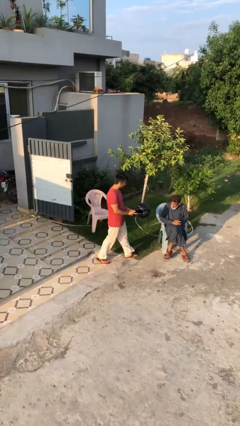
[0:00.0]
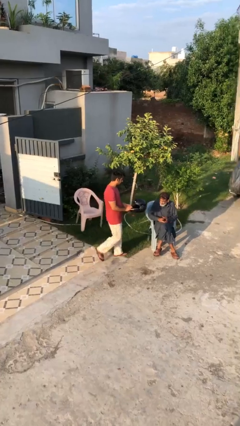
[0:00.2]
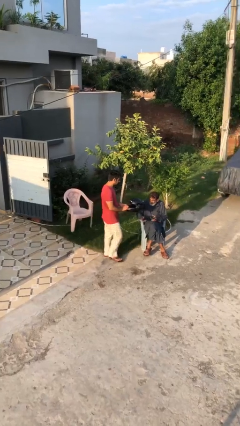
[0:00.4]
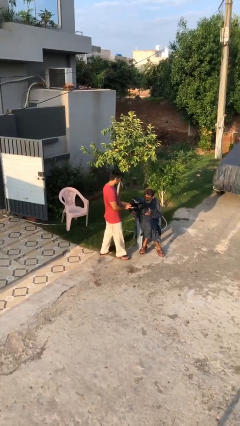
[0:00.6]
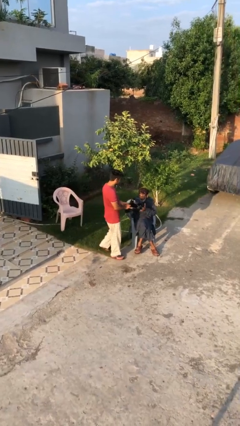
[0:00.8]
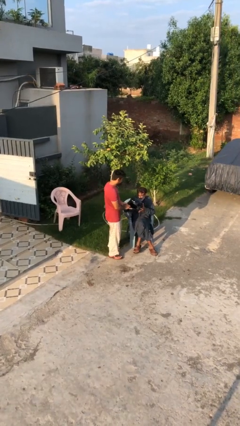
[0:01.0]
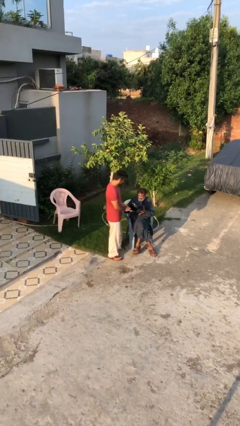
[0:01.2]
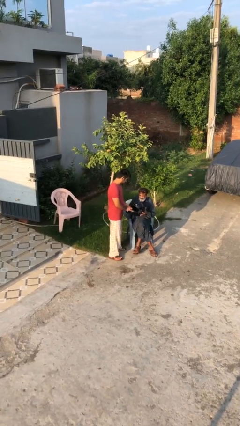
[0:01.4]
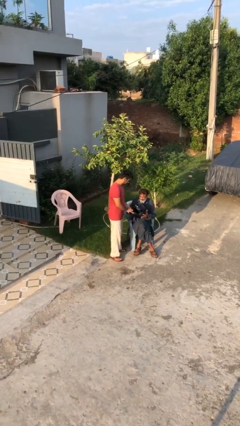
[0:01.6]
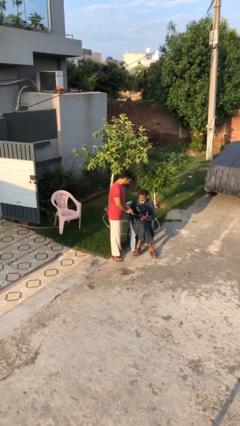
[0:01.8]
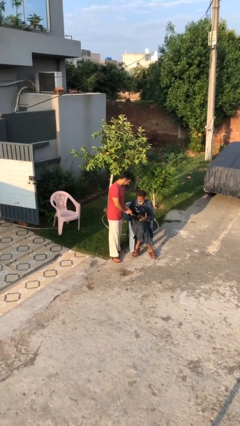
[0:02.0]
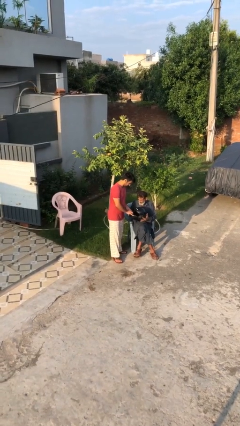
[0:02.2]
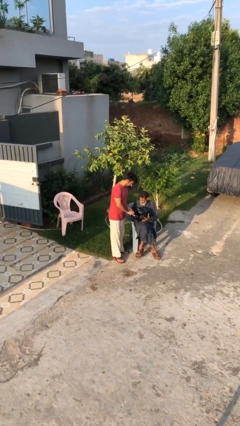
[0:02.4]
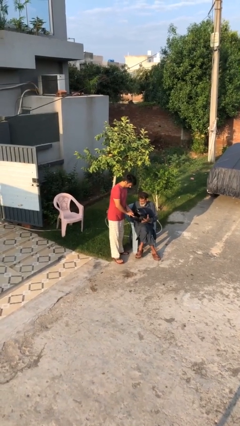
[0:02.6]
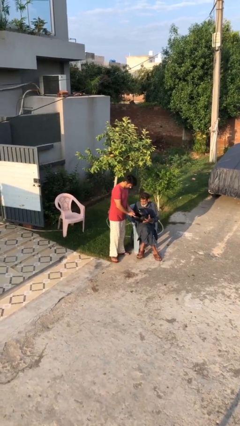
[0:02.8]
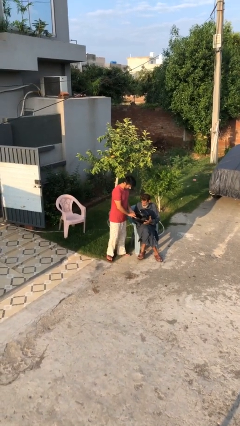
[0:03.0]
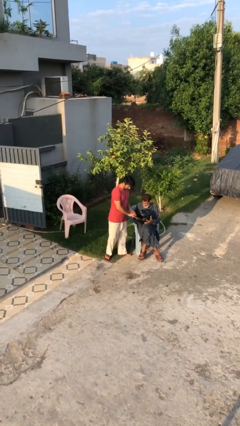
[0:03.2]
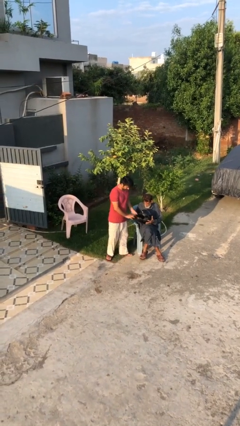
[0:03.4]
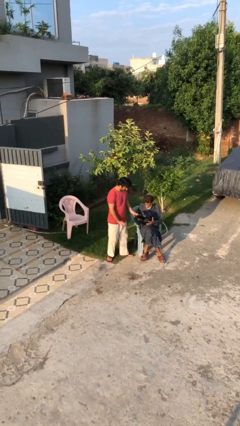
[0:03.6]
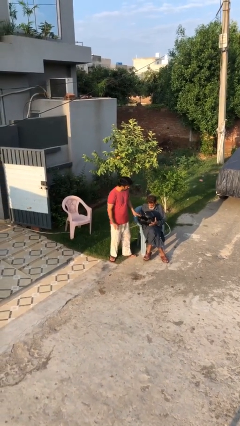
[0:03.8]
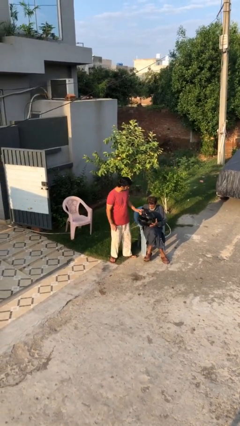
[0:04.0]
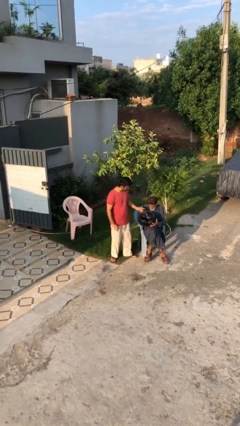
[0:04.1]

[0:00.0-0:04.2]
person transfers object to person

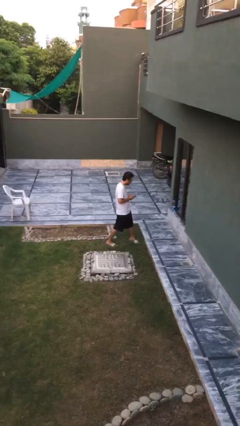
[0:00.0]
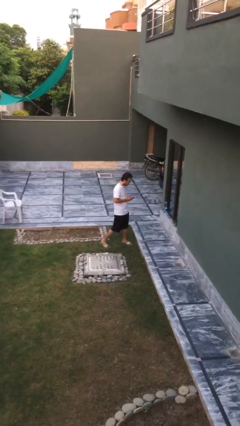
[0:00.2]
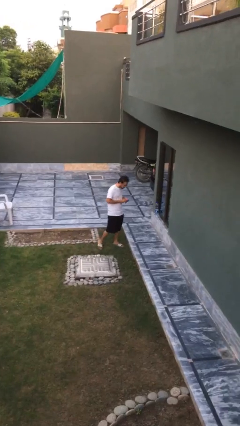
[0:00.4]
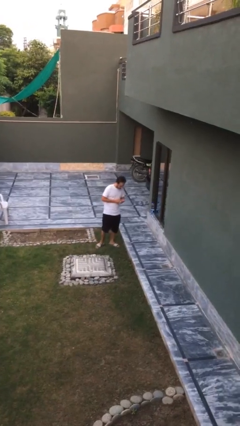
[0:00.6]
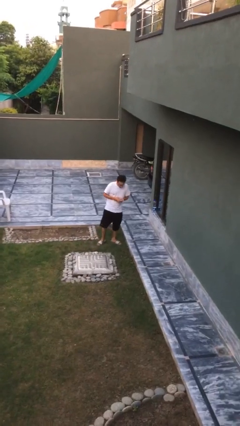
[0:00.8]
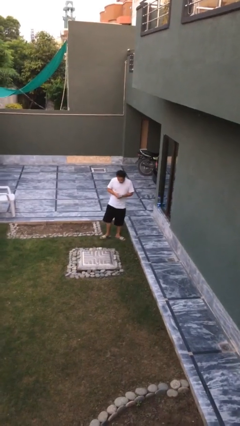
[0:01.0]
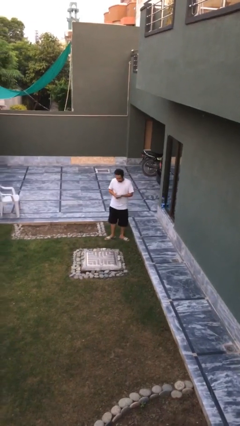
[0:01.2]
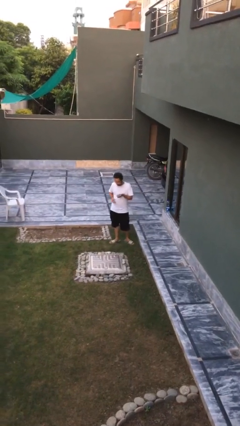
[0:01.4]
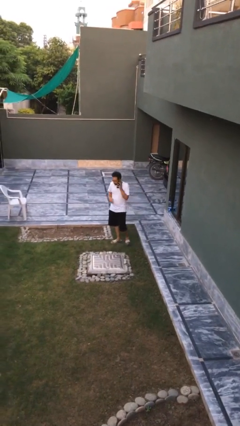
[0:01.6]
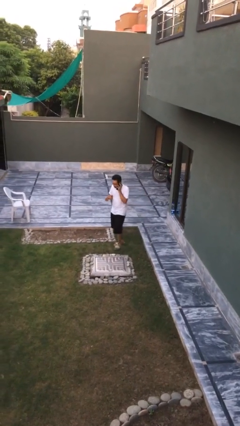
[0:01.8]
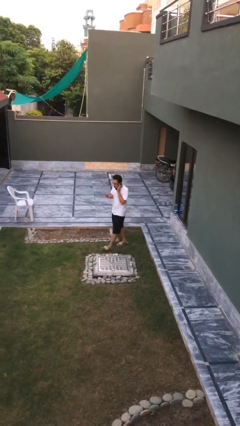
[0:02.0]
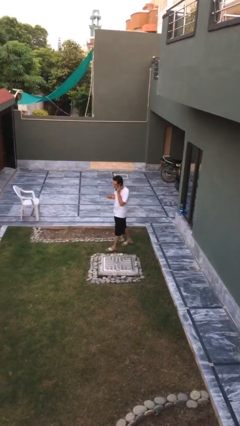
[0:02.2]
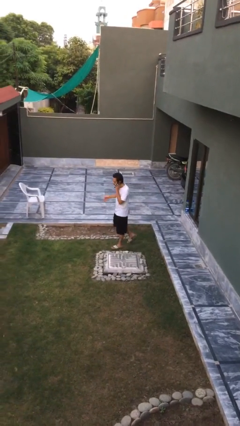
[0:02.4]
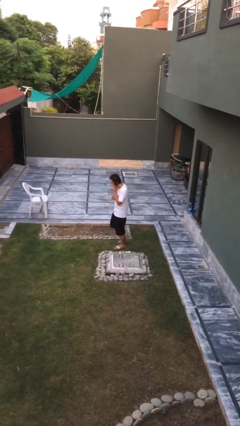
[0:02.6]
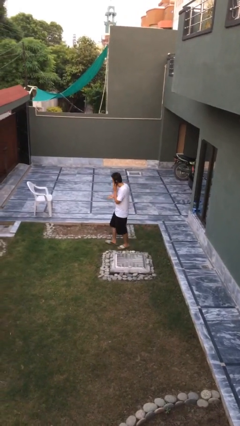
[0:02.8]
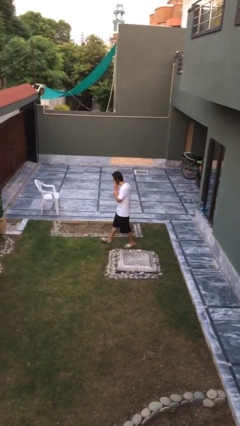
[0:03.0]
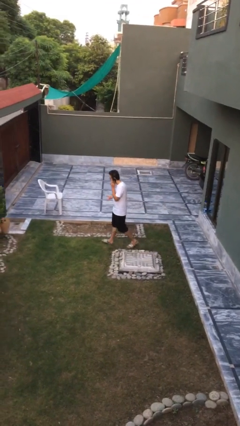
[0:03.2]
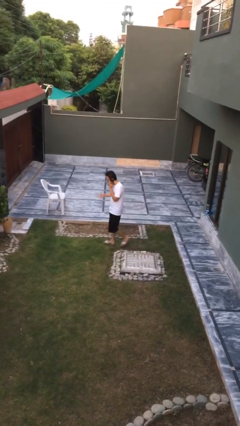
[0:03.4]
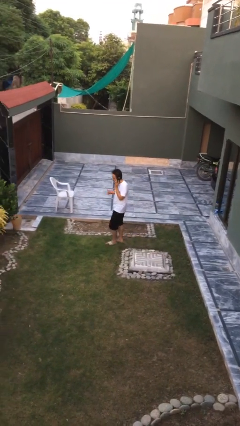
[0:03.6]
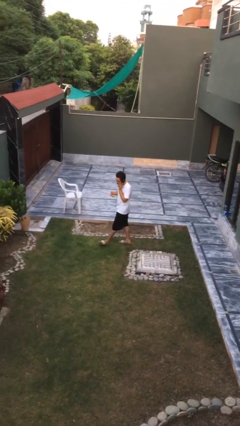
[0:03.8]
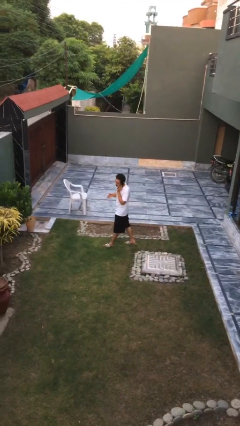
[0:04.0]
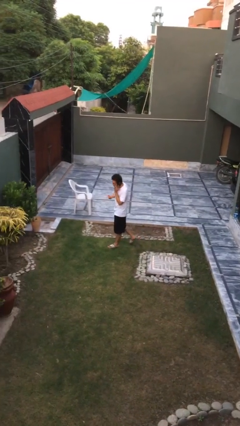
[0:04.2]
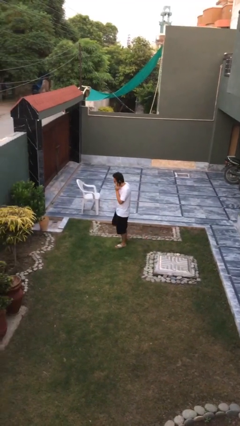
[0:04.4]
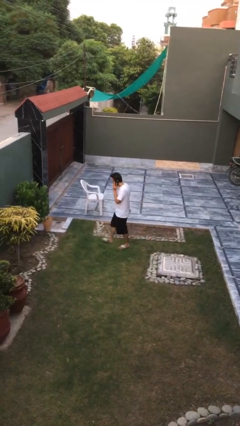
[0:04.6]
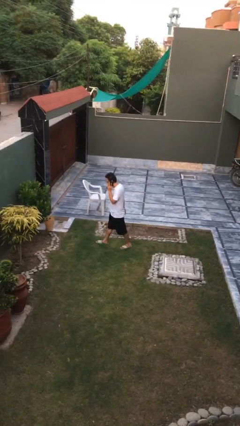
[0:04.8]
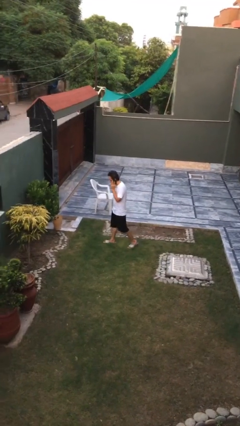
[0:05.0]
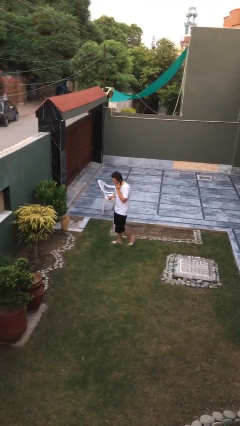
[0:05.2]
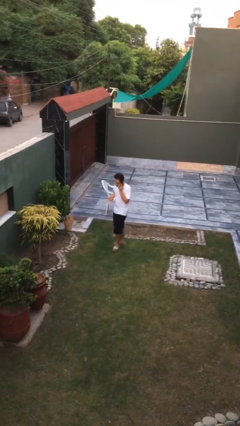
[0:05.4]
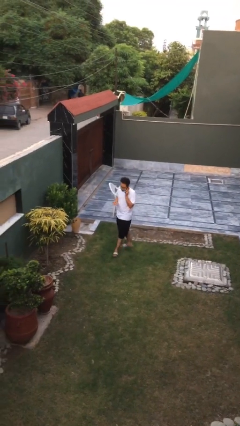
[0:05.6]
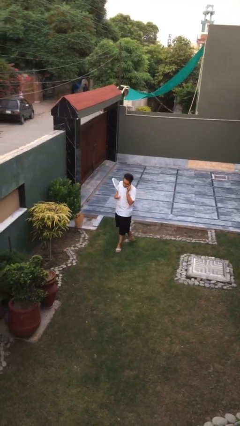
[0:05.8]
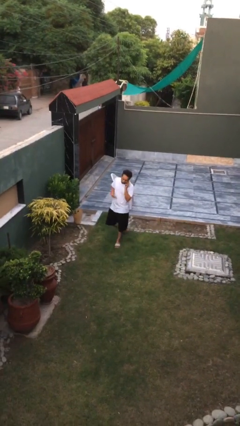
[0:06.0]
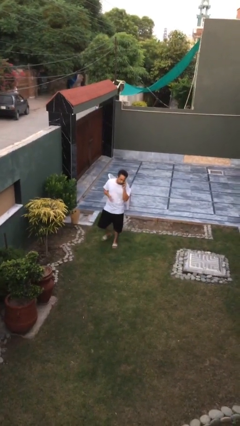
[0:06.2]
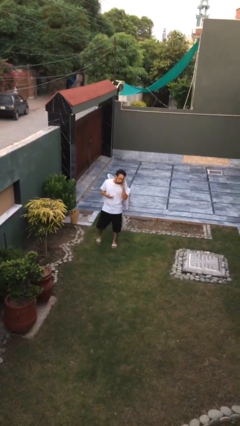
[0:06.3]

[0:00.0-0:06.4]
person talks on phone

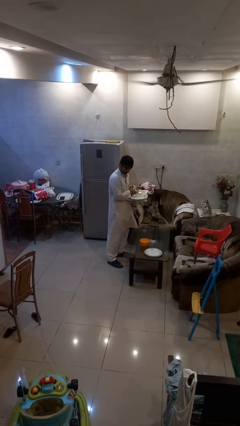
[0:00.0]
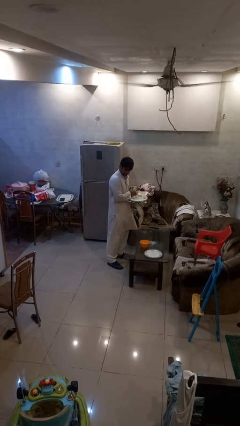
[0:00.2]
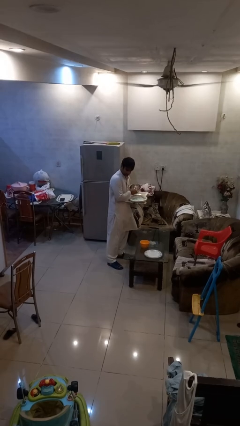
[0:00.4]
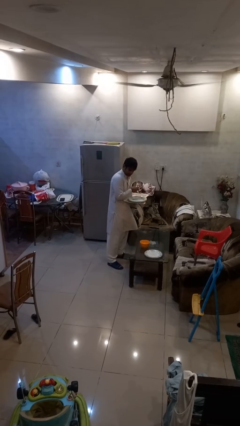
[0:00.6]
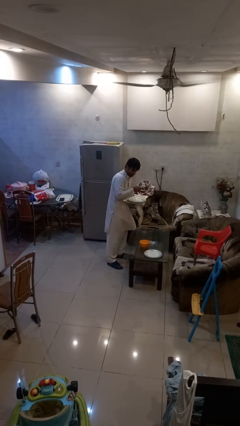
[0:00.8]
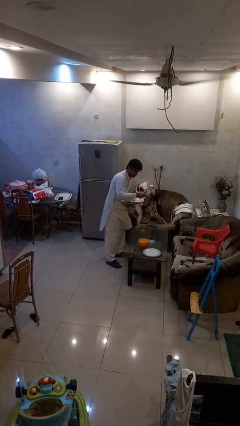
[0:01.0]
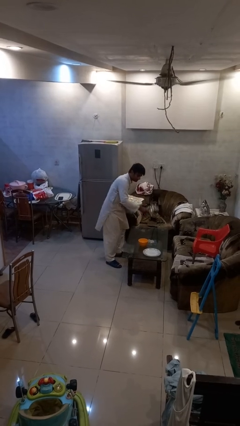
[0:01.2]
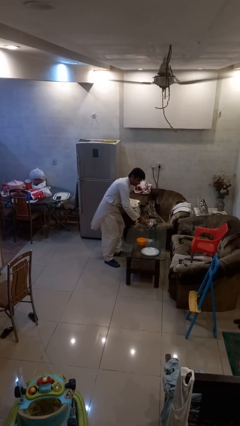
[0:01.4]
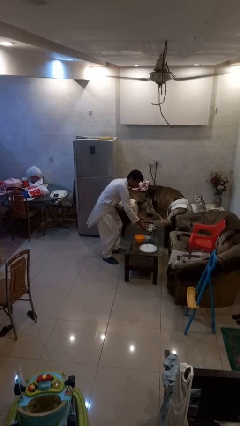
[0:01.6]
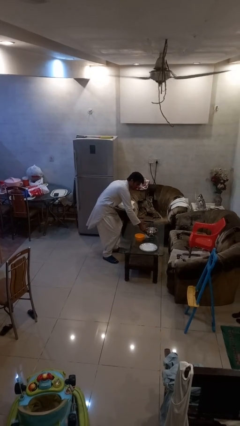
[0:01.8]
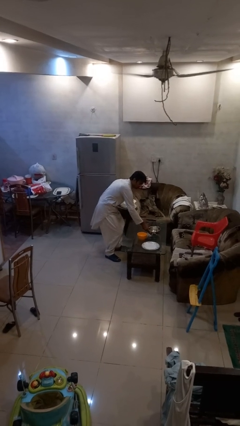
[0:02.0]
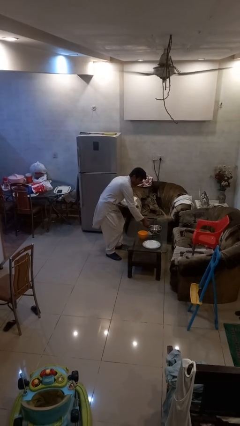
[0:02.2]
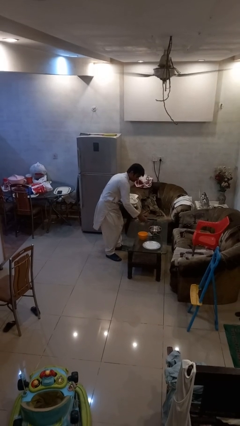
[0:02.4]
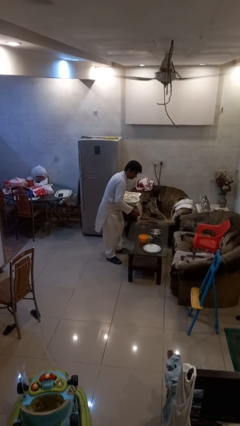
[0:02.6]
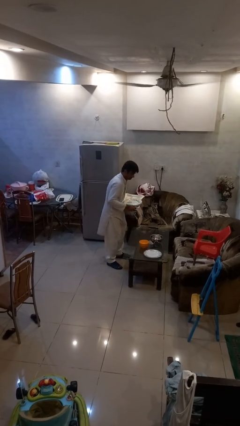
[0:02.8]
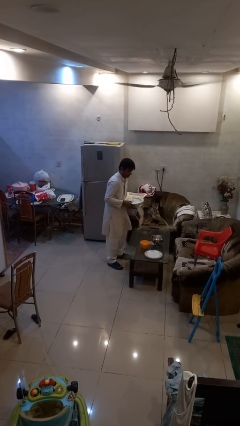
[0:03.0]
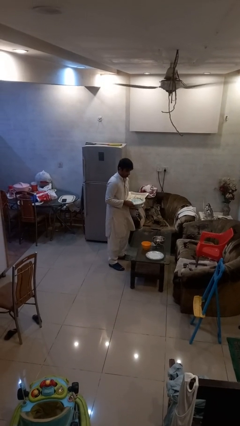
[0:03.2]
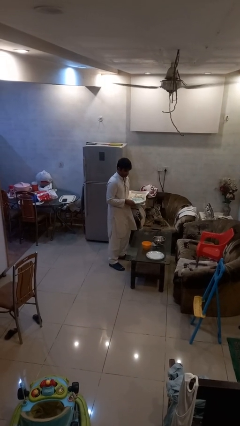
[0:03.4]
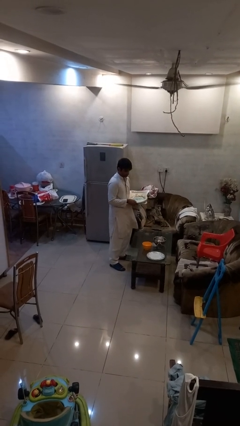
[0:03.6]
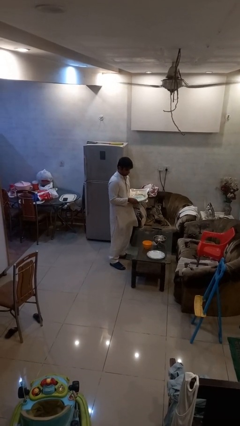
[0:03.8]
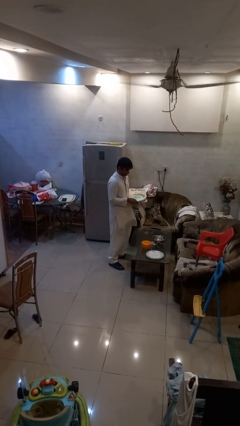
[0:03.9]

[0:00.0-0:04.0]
person sets table

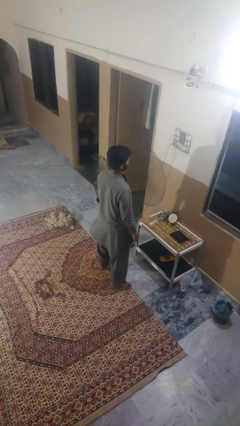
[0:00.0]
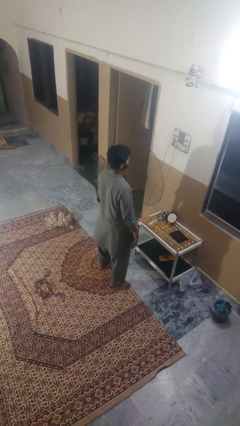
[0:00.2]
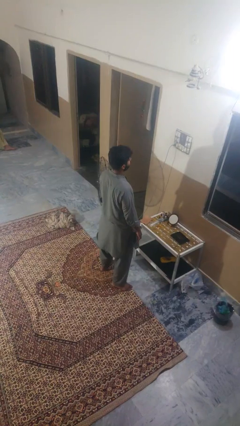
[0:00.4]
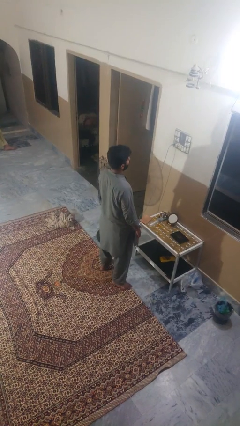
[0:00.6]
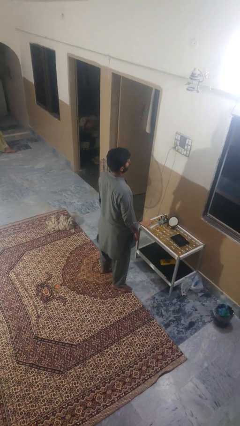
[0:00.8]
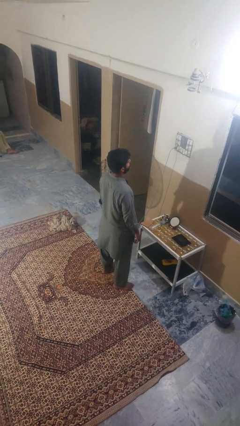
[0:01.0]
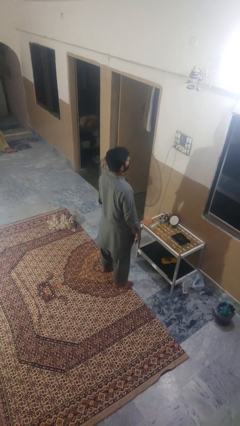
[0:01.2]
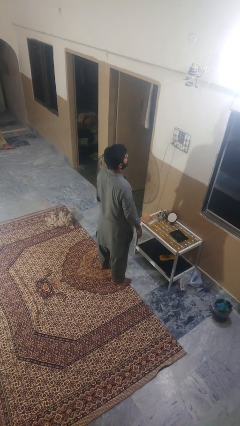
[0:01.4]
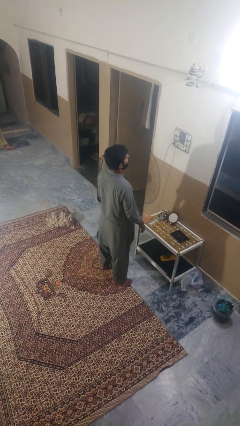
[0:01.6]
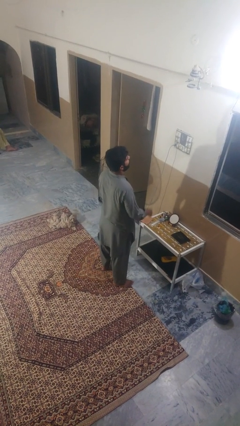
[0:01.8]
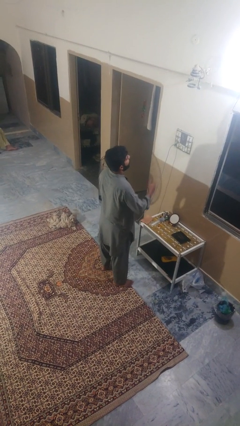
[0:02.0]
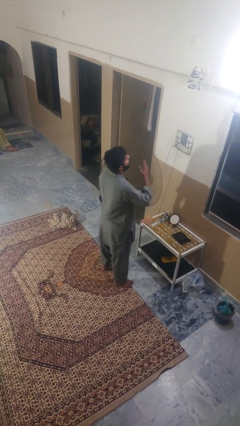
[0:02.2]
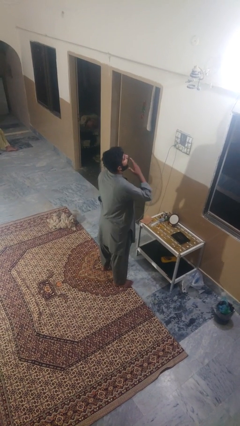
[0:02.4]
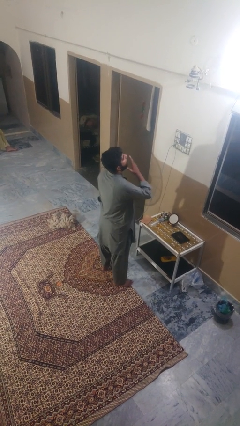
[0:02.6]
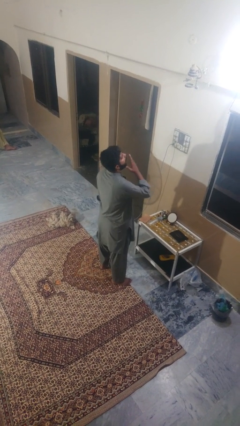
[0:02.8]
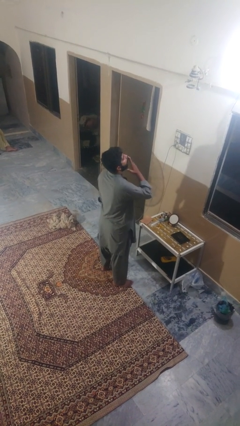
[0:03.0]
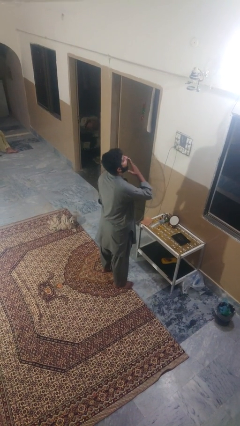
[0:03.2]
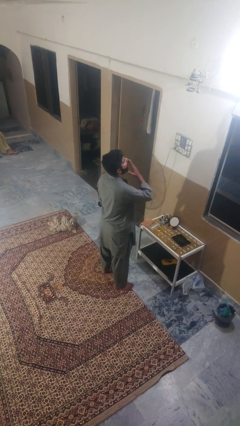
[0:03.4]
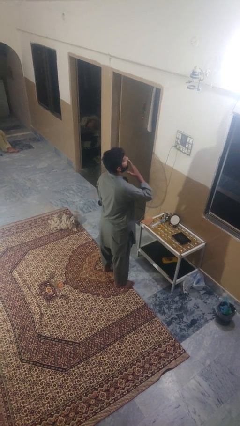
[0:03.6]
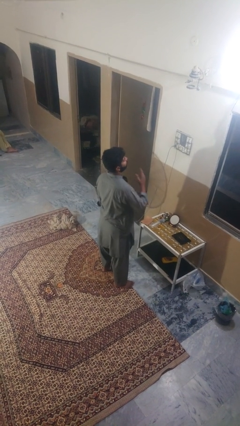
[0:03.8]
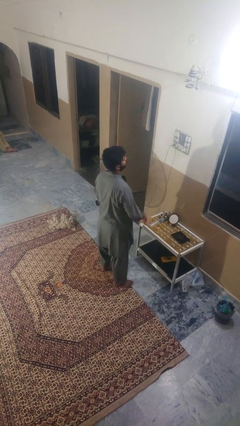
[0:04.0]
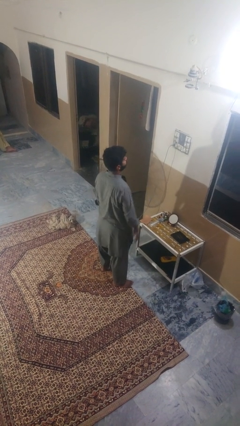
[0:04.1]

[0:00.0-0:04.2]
person yawns
